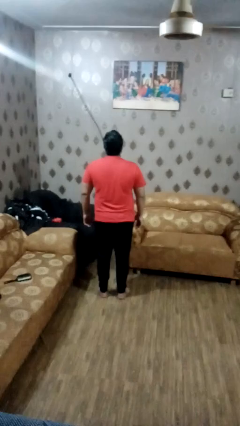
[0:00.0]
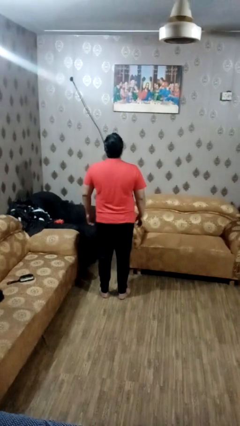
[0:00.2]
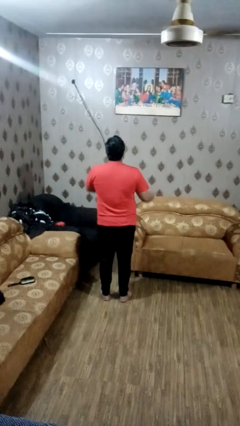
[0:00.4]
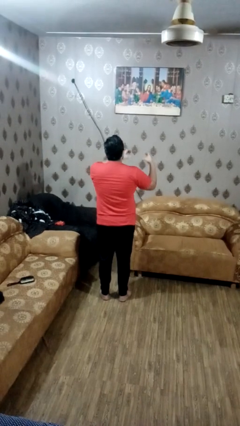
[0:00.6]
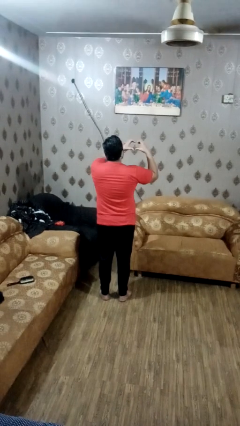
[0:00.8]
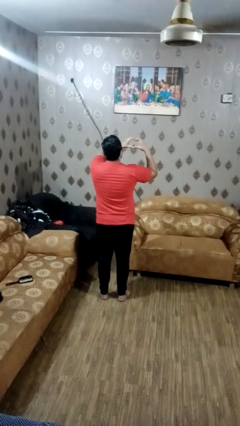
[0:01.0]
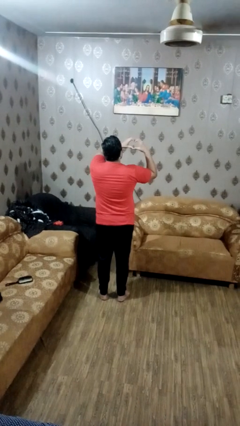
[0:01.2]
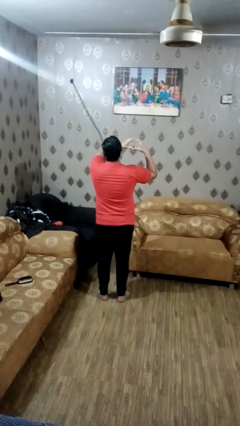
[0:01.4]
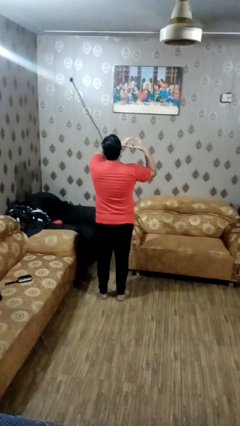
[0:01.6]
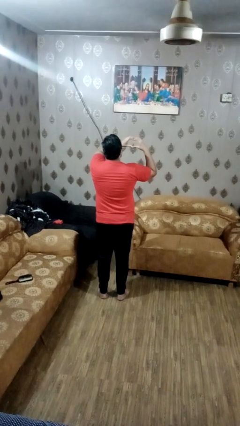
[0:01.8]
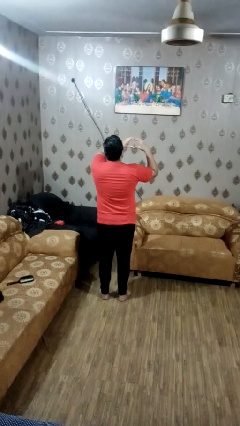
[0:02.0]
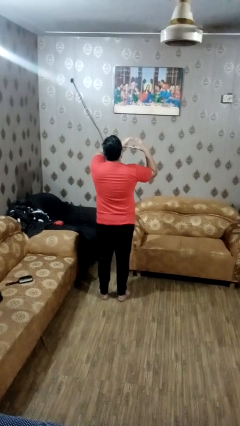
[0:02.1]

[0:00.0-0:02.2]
person gestures heart

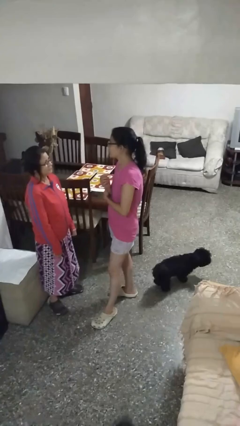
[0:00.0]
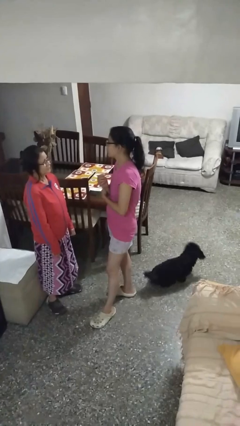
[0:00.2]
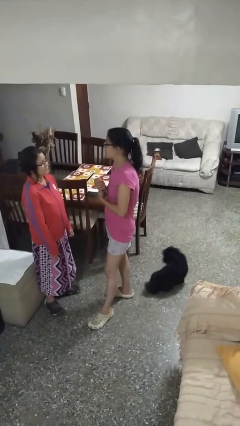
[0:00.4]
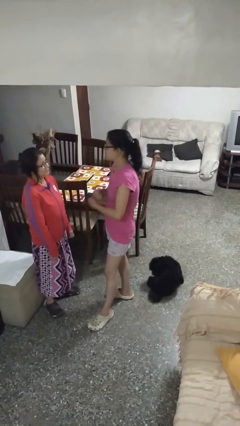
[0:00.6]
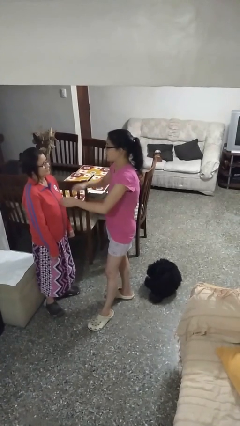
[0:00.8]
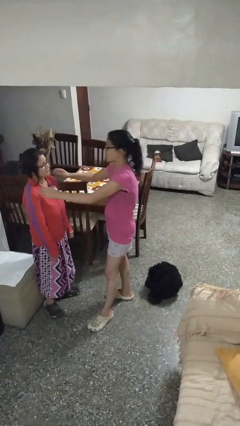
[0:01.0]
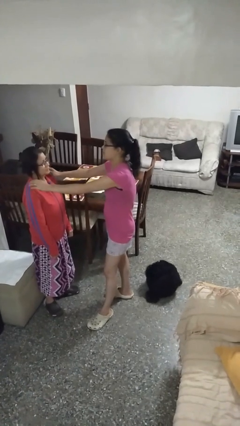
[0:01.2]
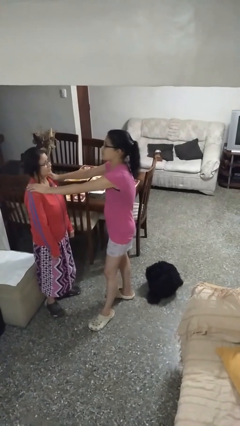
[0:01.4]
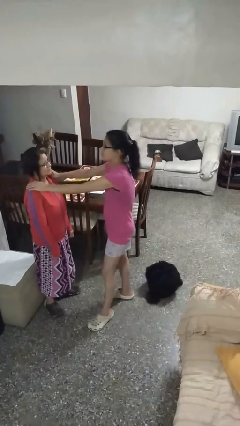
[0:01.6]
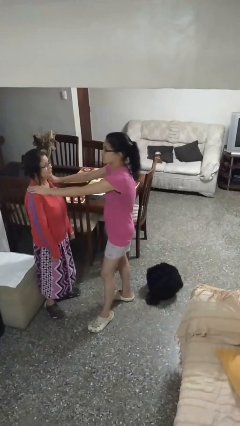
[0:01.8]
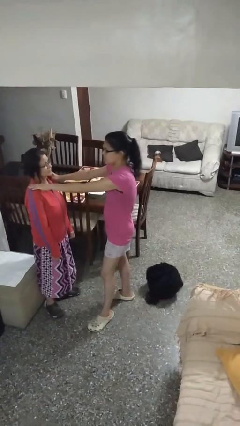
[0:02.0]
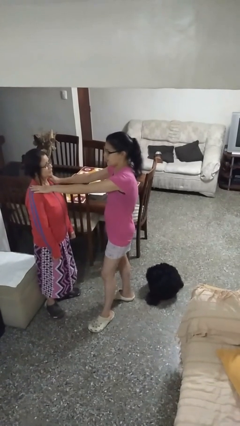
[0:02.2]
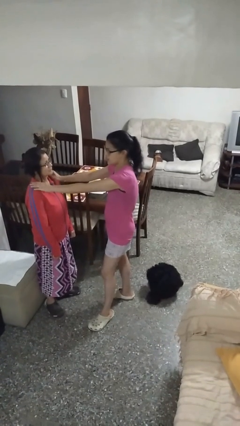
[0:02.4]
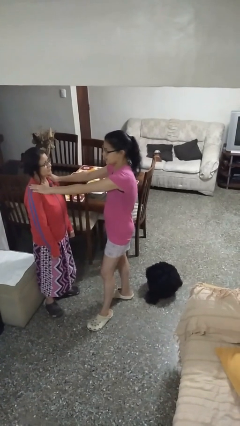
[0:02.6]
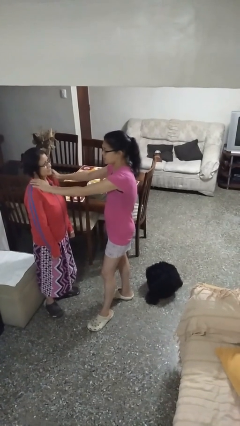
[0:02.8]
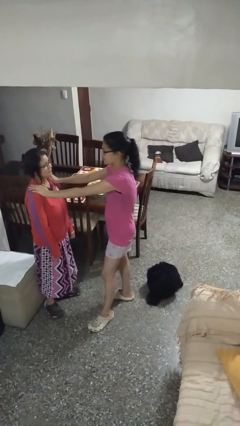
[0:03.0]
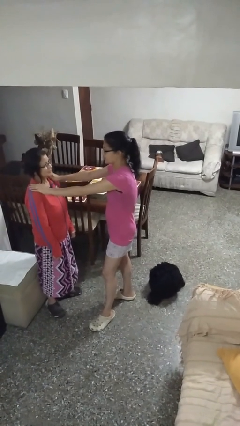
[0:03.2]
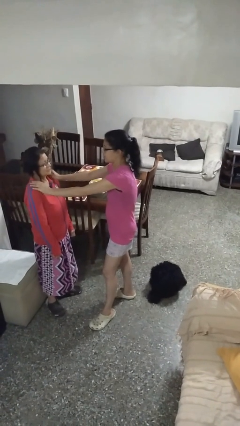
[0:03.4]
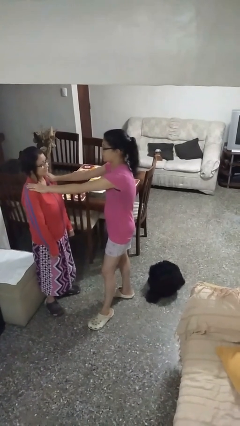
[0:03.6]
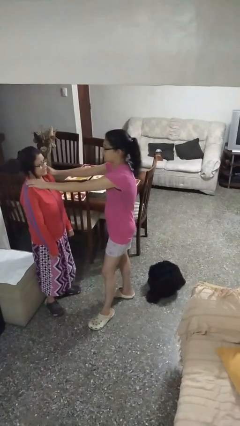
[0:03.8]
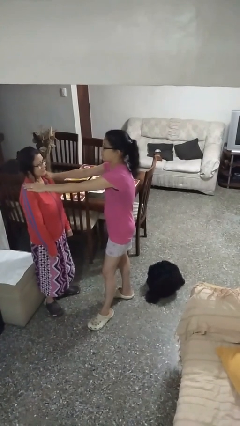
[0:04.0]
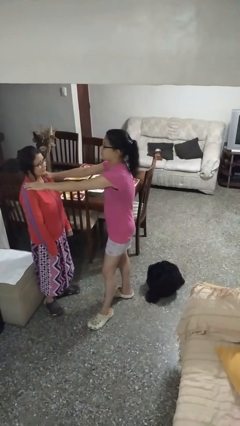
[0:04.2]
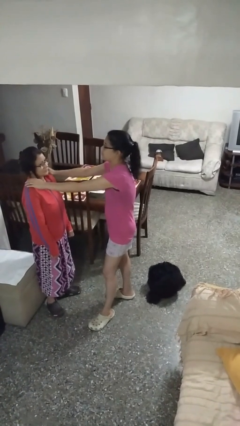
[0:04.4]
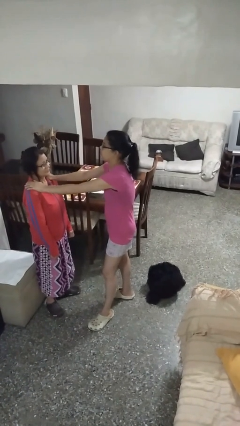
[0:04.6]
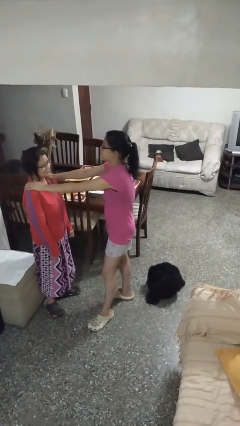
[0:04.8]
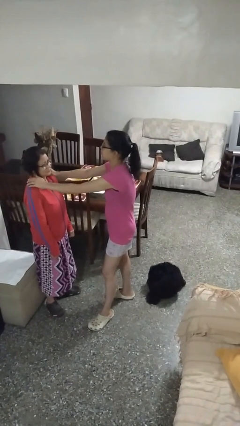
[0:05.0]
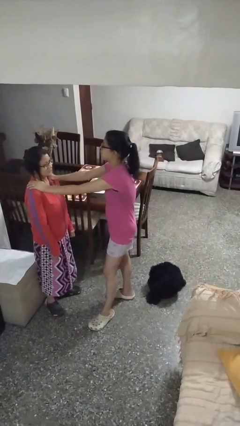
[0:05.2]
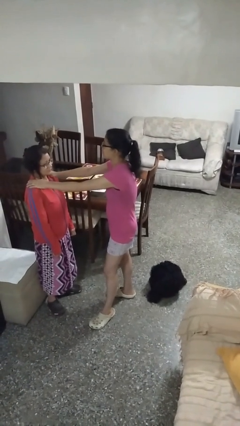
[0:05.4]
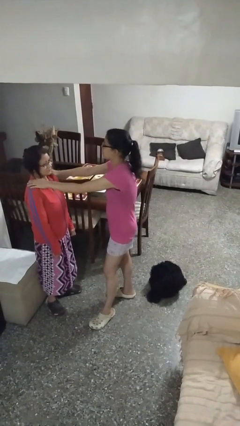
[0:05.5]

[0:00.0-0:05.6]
person pounds shoulders of person

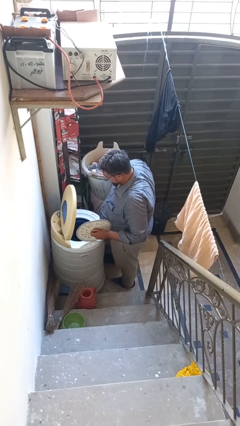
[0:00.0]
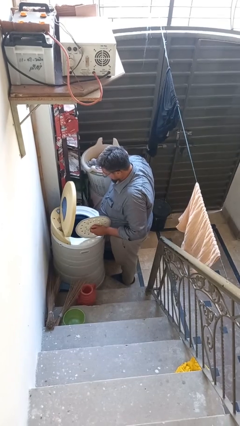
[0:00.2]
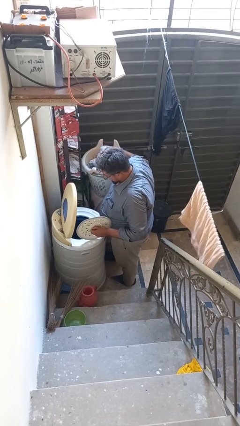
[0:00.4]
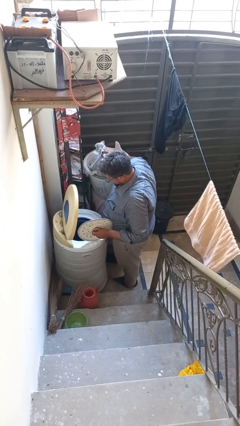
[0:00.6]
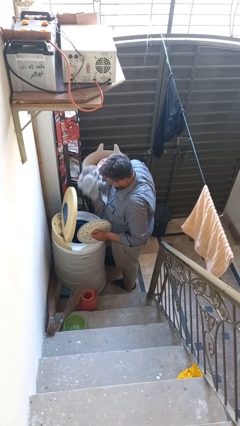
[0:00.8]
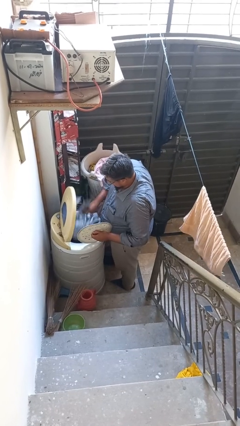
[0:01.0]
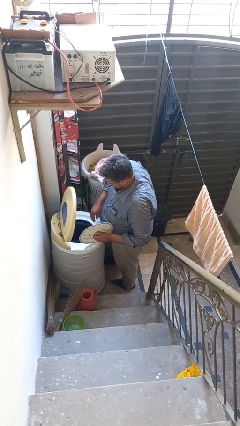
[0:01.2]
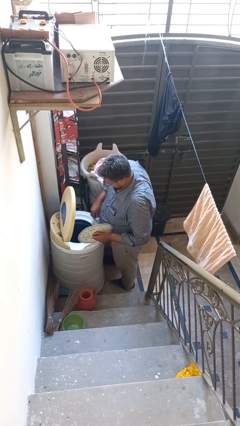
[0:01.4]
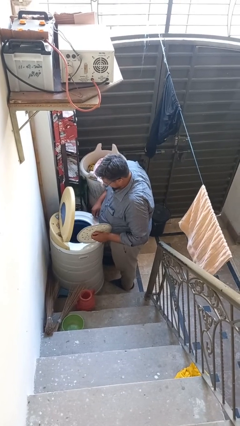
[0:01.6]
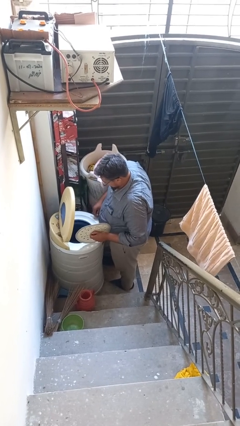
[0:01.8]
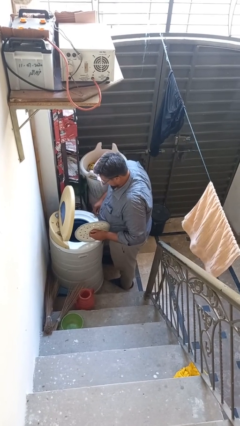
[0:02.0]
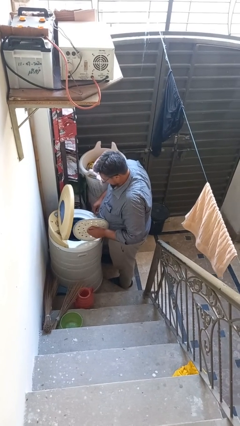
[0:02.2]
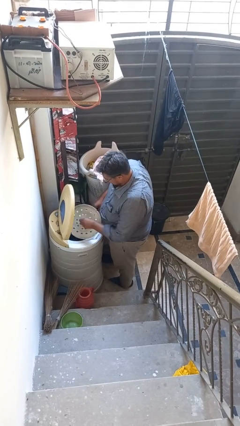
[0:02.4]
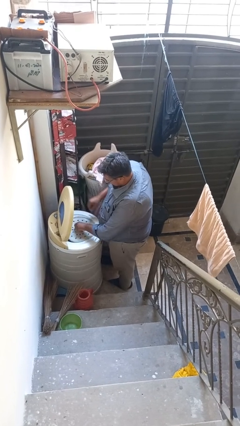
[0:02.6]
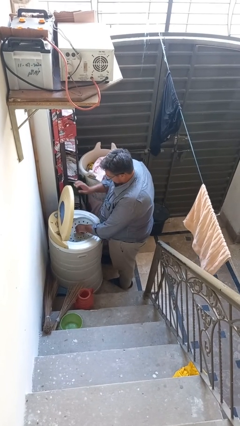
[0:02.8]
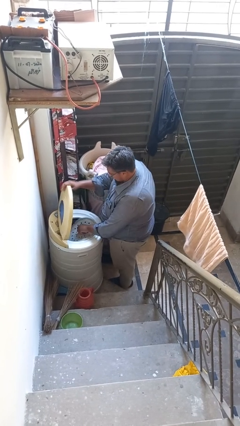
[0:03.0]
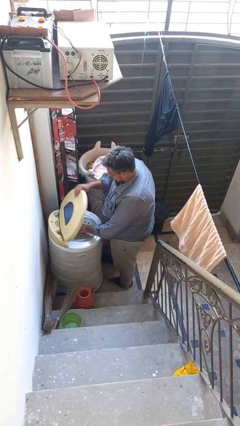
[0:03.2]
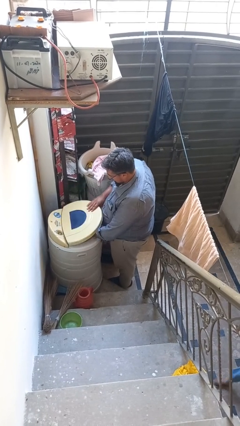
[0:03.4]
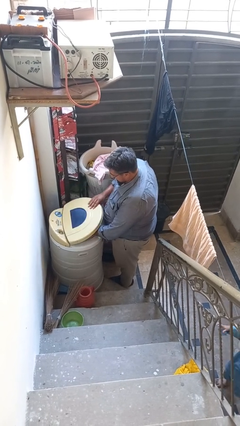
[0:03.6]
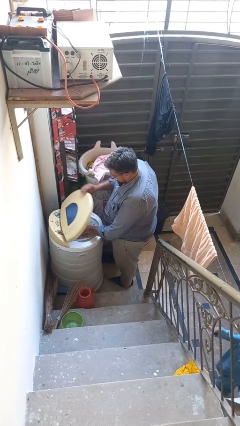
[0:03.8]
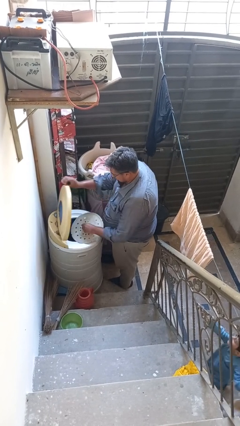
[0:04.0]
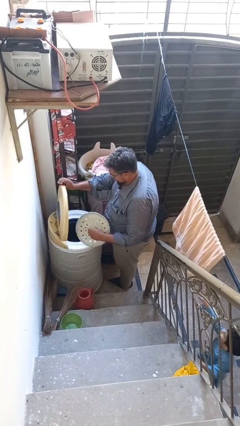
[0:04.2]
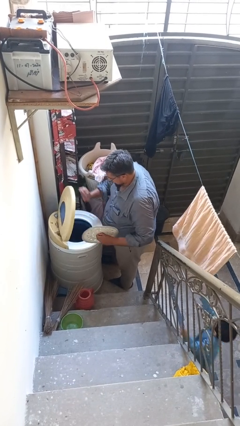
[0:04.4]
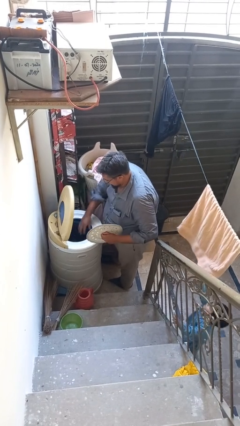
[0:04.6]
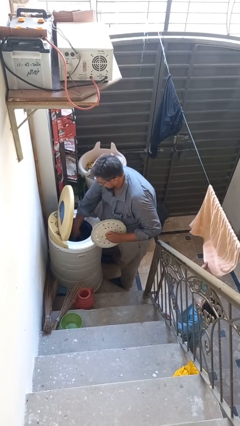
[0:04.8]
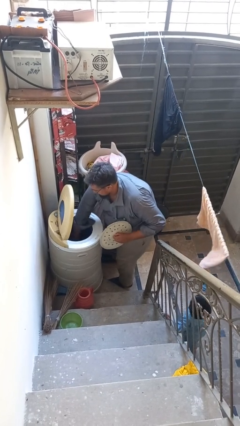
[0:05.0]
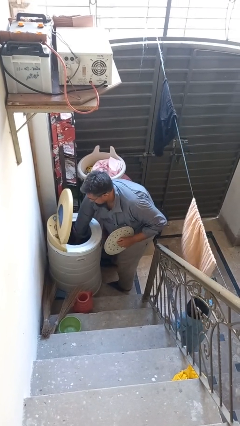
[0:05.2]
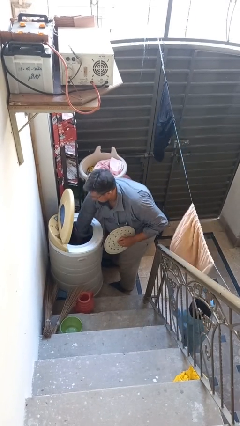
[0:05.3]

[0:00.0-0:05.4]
person loads clotheswasher

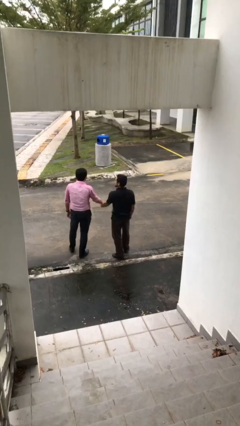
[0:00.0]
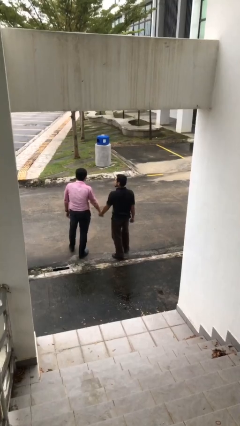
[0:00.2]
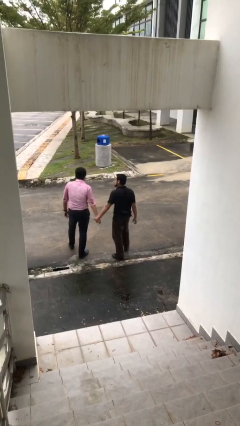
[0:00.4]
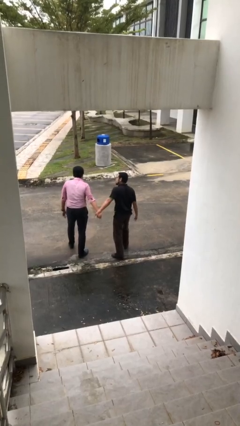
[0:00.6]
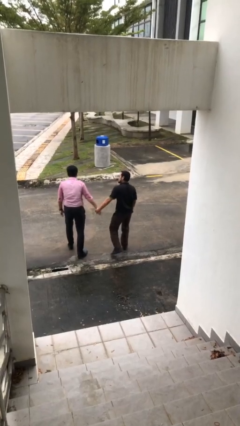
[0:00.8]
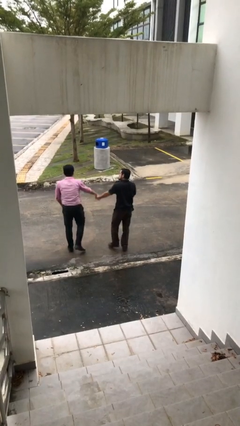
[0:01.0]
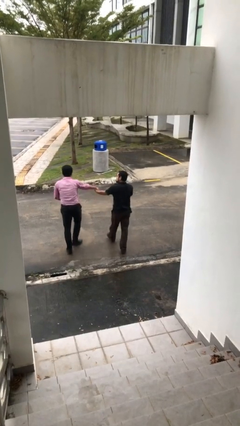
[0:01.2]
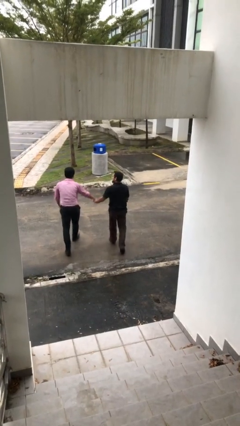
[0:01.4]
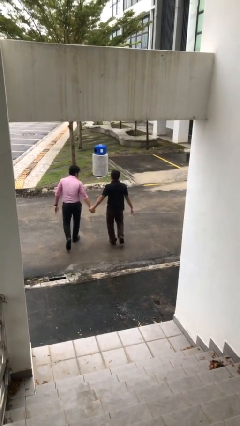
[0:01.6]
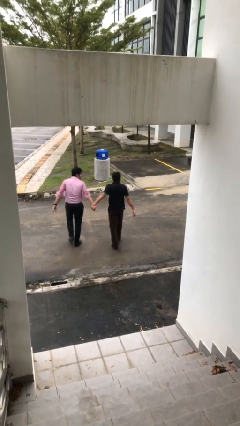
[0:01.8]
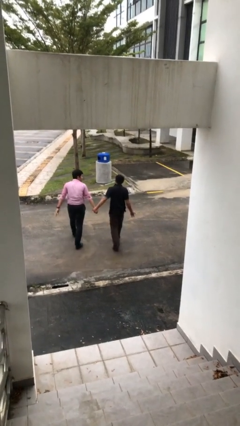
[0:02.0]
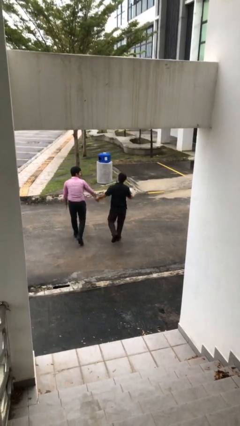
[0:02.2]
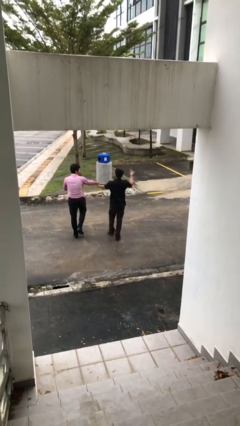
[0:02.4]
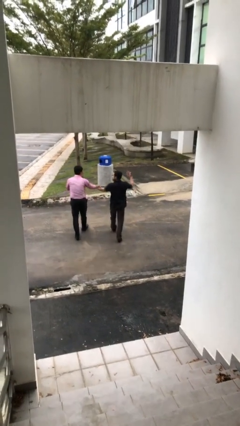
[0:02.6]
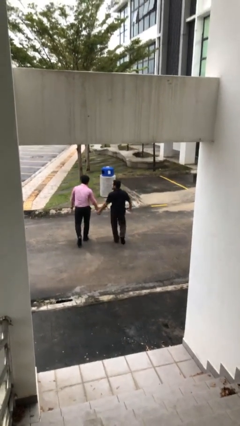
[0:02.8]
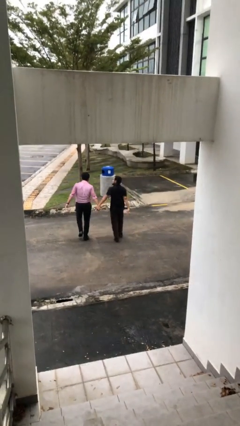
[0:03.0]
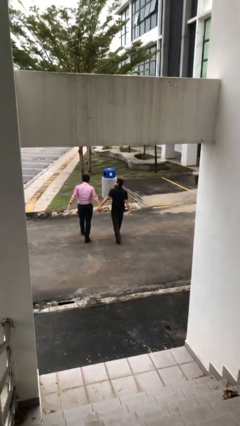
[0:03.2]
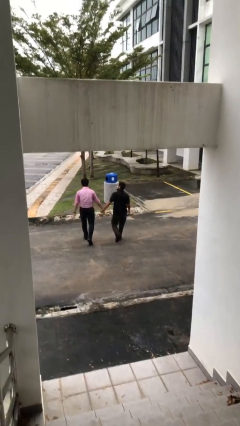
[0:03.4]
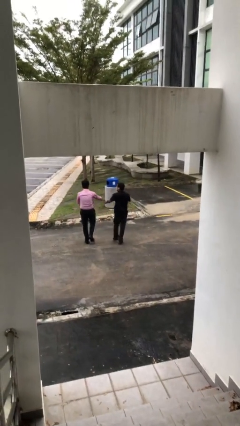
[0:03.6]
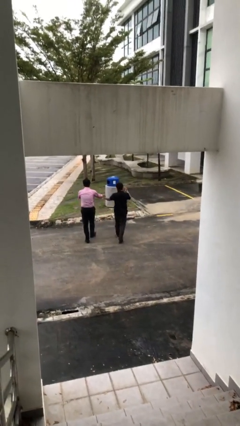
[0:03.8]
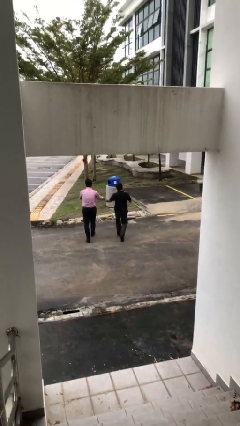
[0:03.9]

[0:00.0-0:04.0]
person holds hand

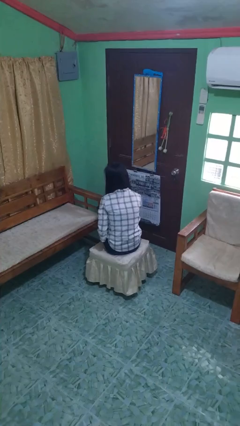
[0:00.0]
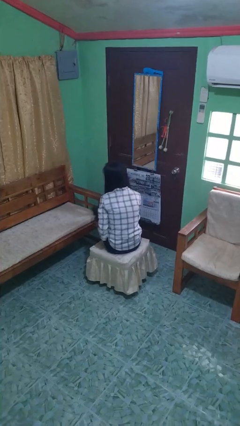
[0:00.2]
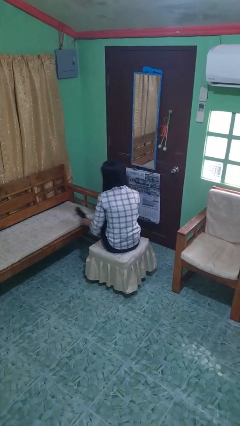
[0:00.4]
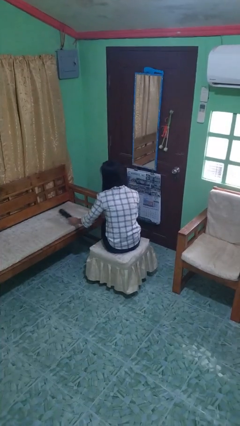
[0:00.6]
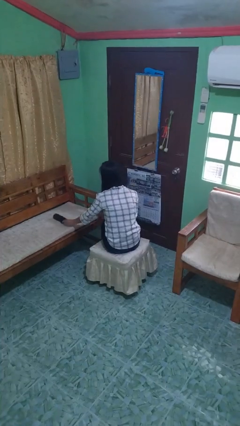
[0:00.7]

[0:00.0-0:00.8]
person puts down object on couch
